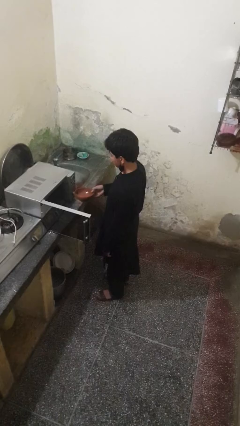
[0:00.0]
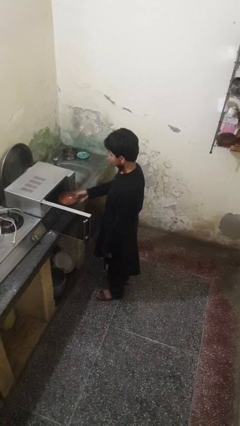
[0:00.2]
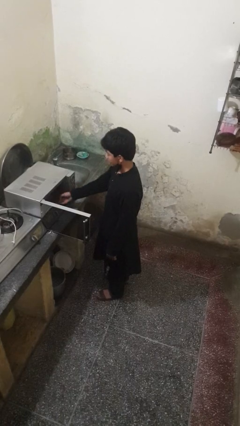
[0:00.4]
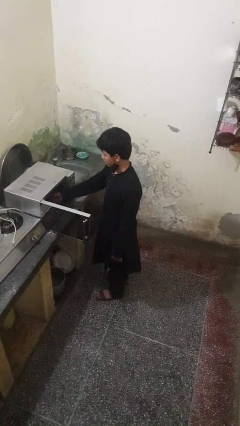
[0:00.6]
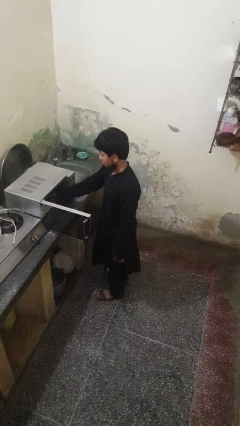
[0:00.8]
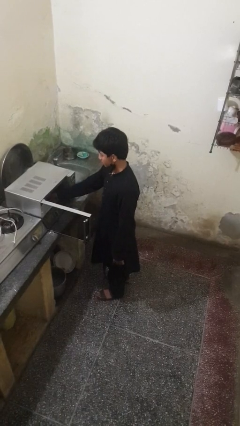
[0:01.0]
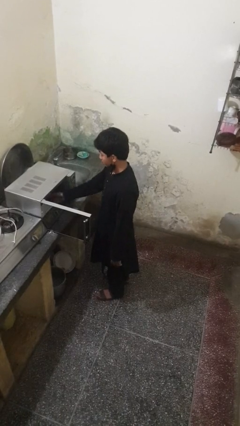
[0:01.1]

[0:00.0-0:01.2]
person puts object into microwave

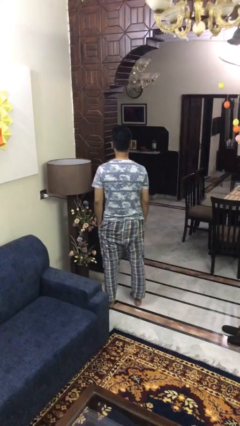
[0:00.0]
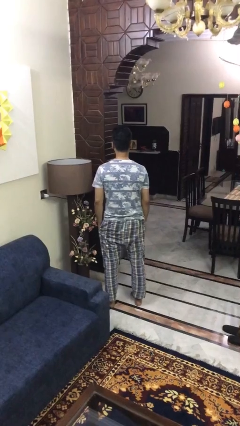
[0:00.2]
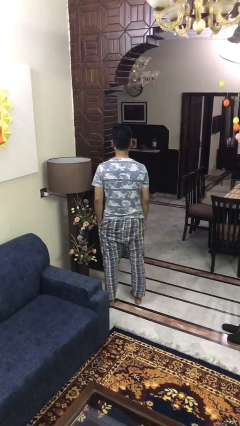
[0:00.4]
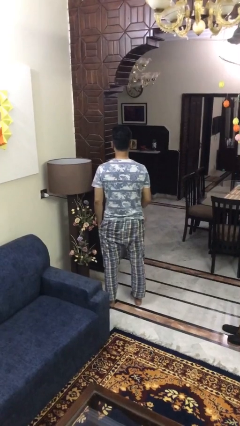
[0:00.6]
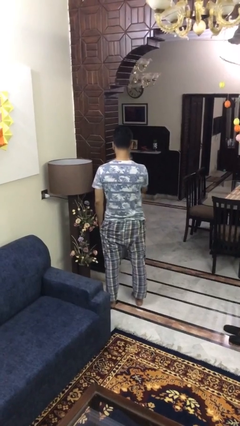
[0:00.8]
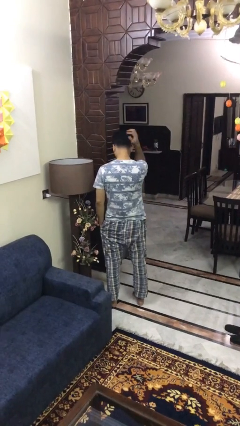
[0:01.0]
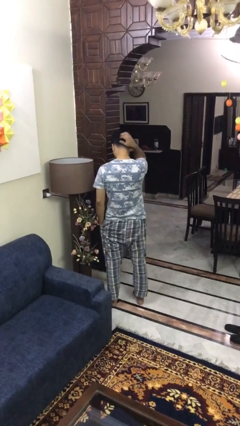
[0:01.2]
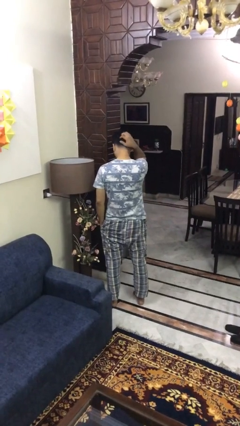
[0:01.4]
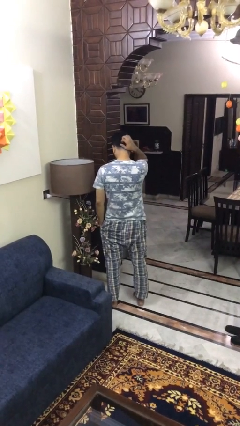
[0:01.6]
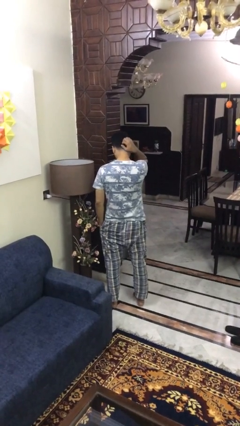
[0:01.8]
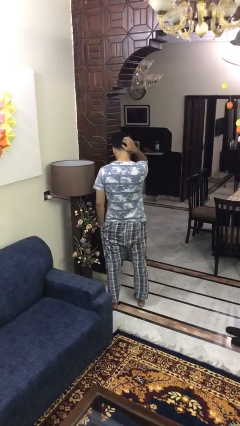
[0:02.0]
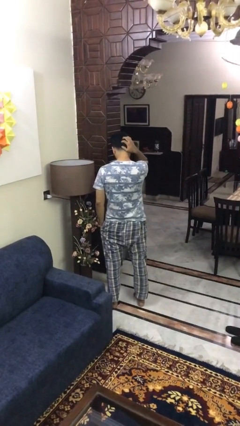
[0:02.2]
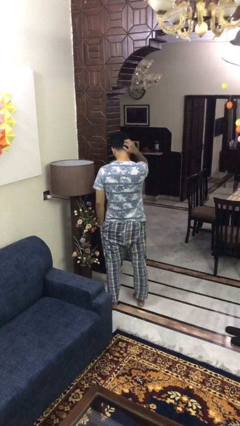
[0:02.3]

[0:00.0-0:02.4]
person scratches face

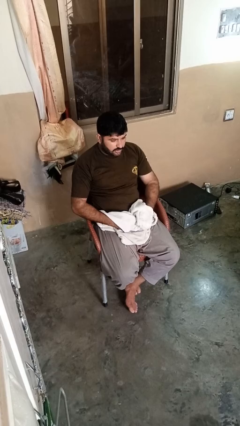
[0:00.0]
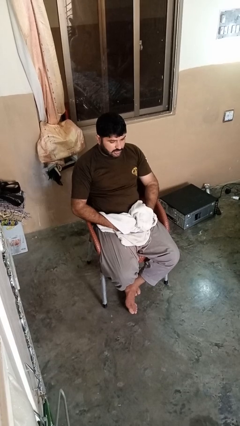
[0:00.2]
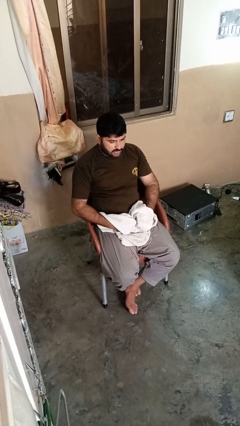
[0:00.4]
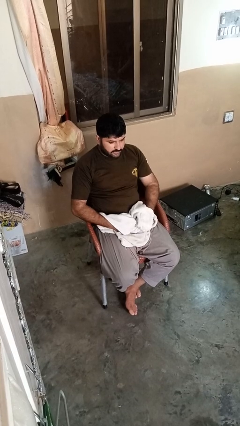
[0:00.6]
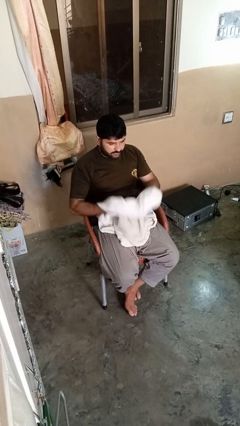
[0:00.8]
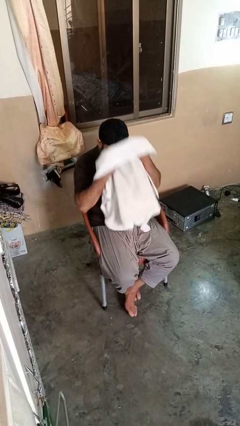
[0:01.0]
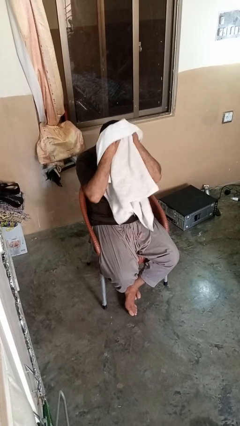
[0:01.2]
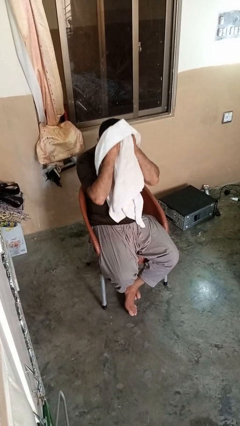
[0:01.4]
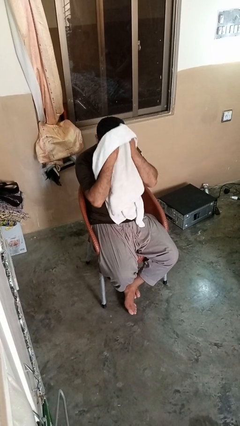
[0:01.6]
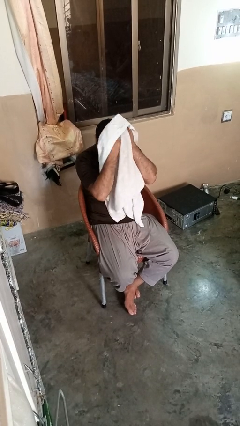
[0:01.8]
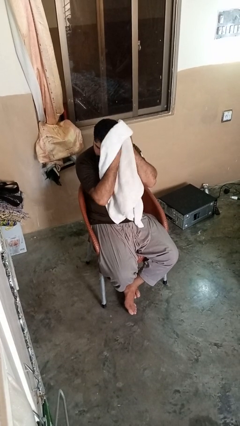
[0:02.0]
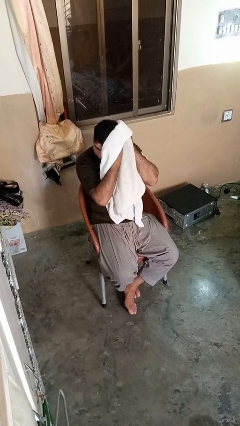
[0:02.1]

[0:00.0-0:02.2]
person dries hair with towel

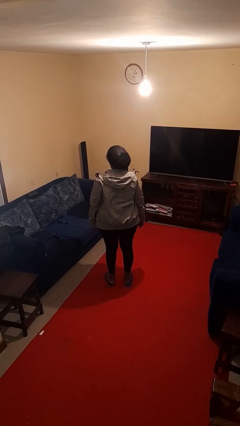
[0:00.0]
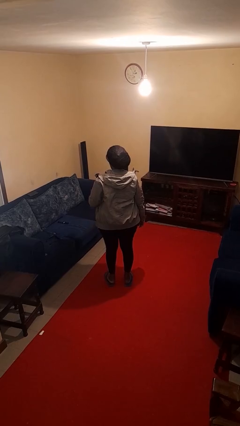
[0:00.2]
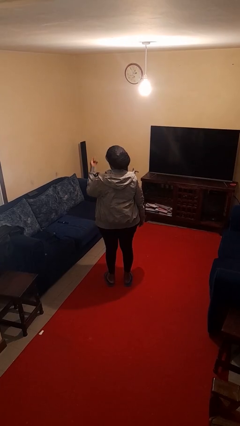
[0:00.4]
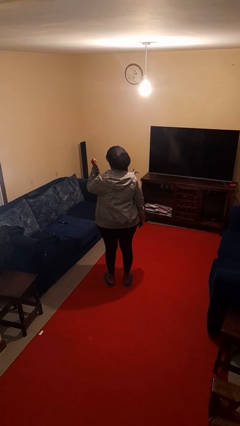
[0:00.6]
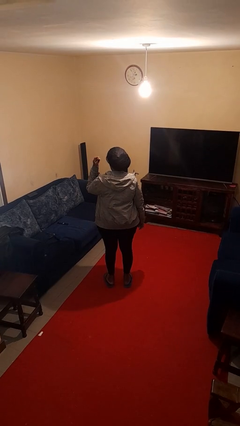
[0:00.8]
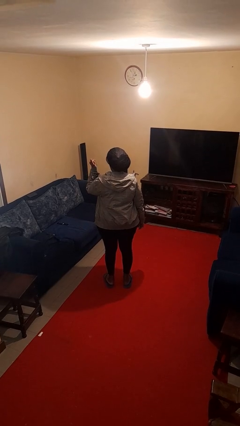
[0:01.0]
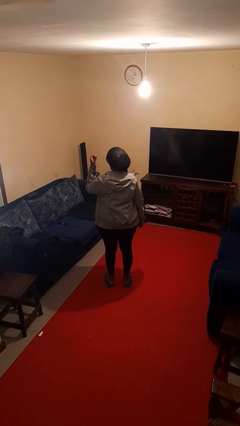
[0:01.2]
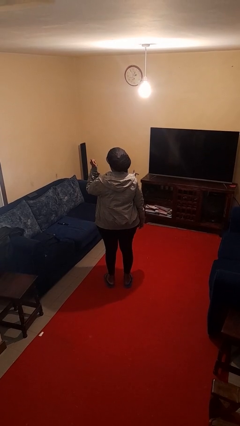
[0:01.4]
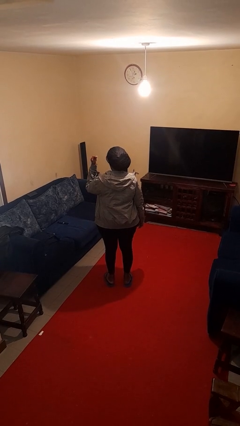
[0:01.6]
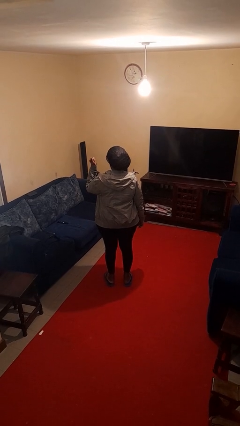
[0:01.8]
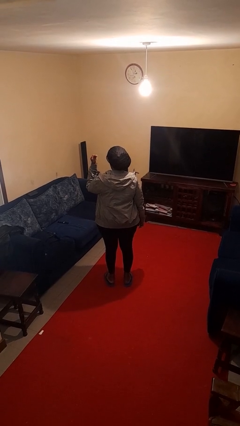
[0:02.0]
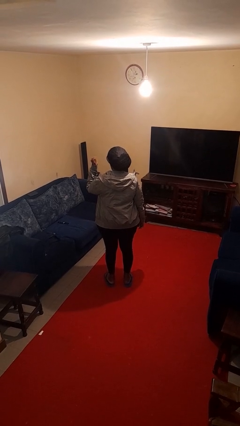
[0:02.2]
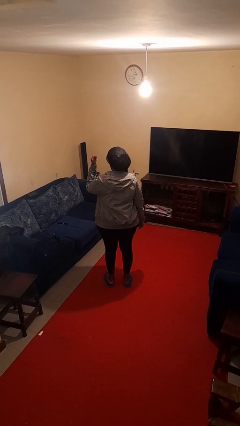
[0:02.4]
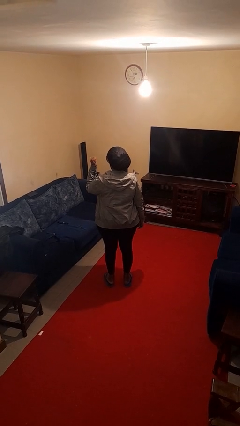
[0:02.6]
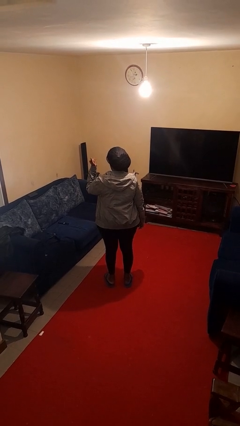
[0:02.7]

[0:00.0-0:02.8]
person snaps fingers

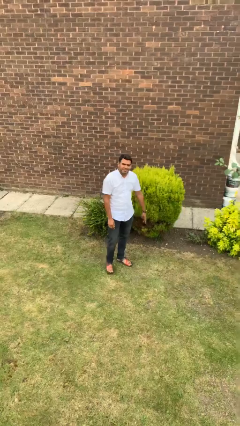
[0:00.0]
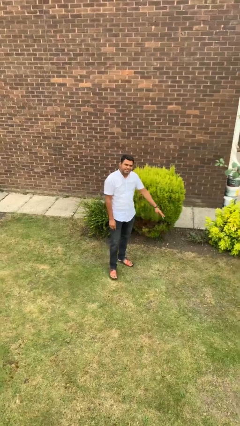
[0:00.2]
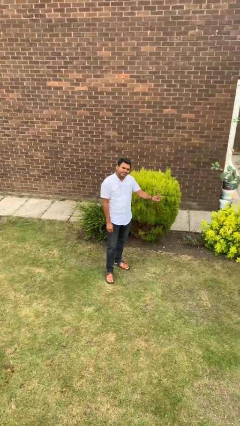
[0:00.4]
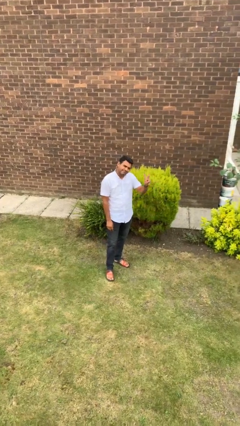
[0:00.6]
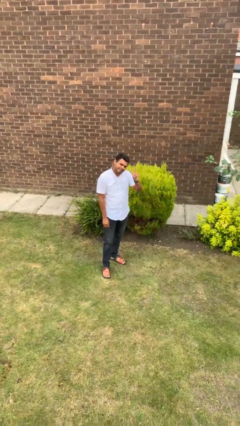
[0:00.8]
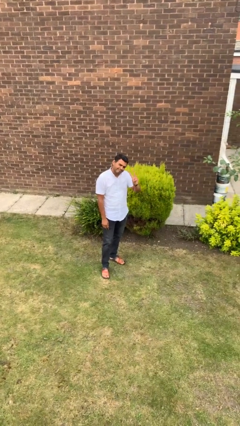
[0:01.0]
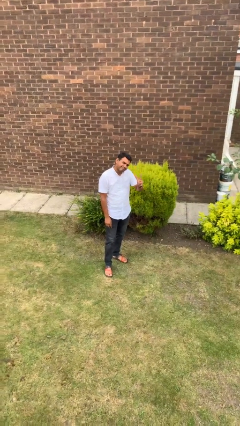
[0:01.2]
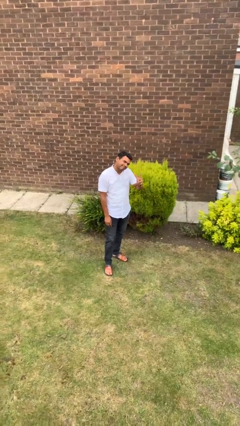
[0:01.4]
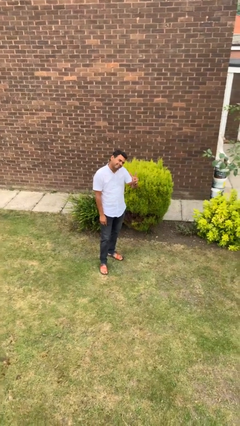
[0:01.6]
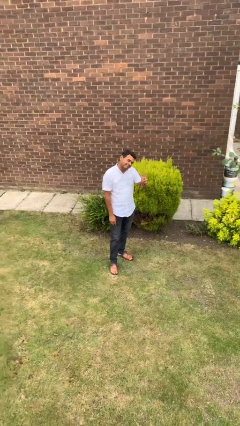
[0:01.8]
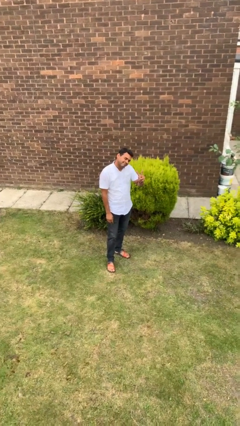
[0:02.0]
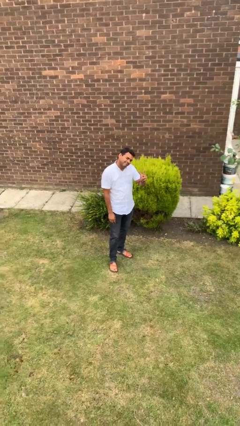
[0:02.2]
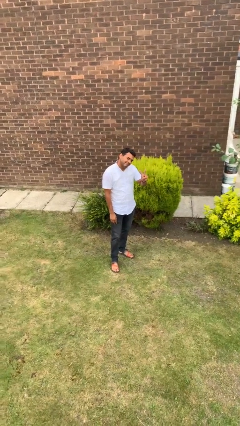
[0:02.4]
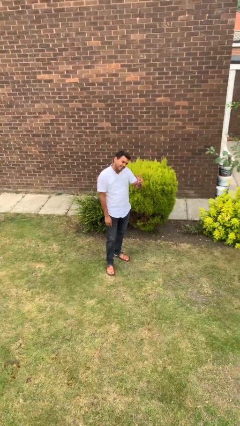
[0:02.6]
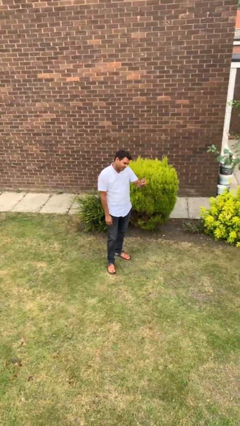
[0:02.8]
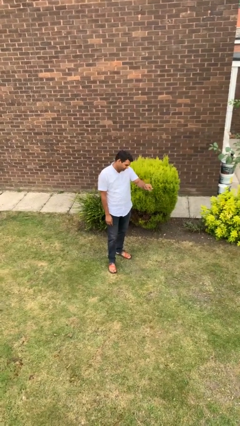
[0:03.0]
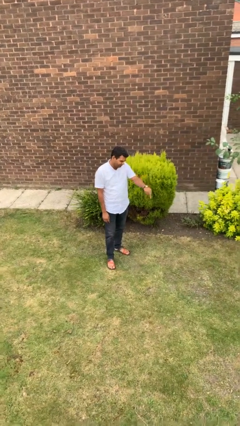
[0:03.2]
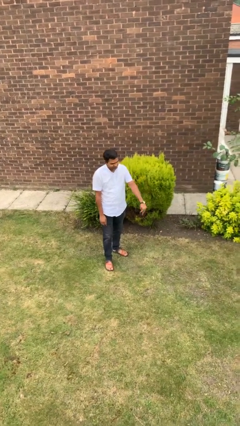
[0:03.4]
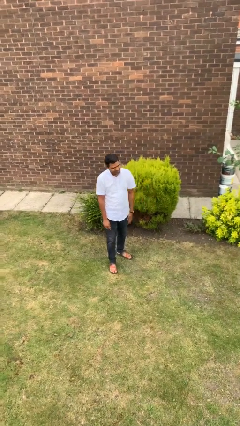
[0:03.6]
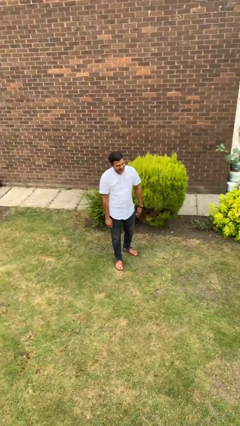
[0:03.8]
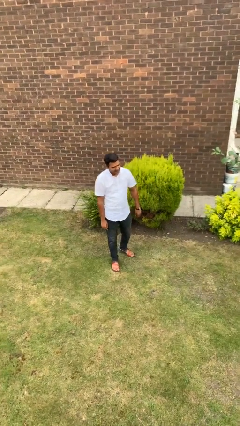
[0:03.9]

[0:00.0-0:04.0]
person gestures peace

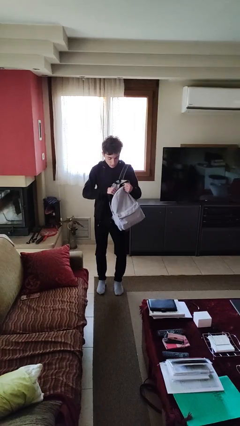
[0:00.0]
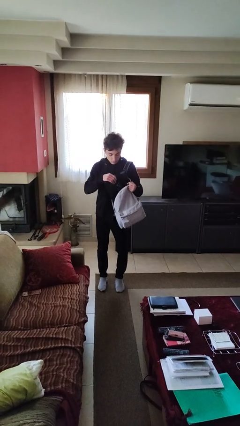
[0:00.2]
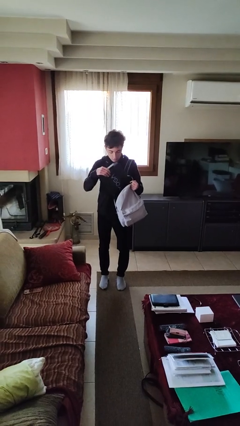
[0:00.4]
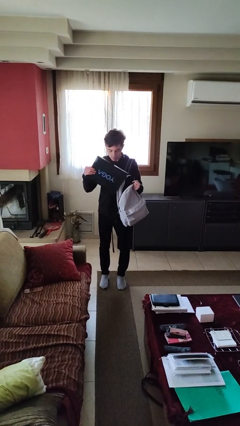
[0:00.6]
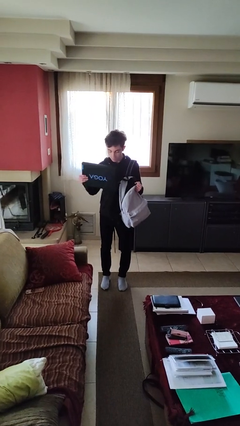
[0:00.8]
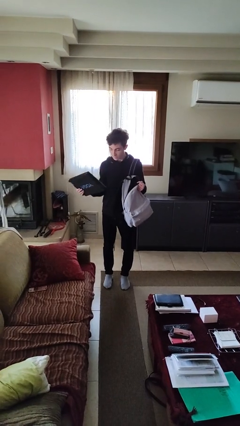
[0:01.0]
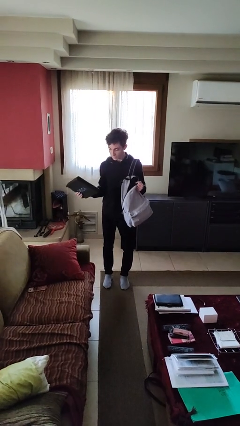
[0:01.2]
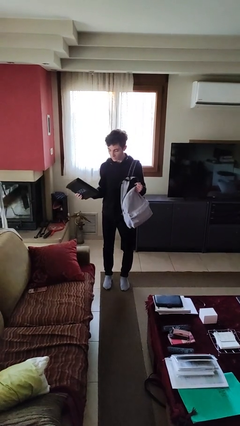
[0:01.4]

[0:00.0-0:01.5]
person takes object from backpack

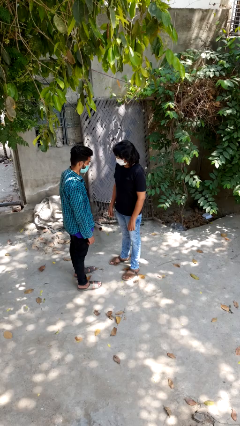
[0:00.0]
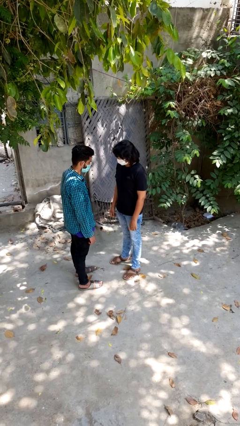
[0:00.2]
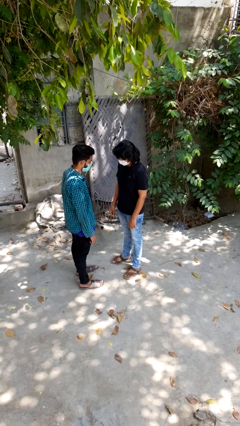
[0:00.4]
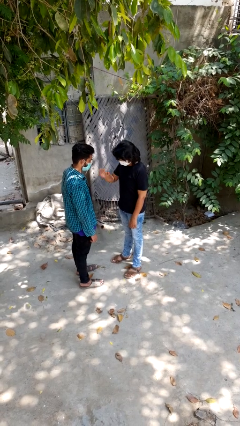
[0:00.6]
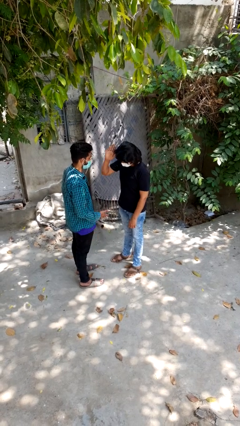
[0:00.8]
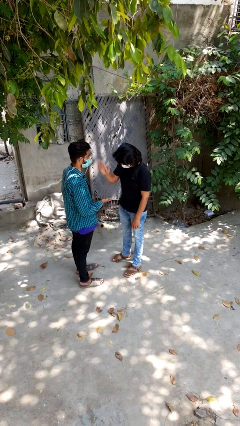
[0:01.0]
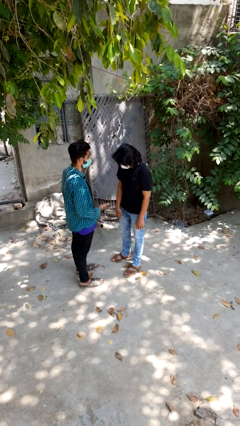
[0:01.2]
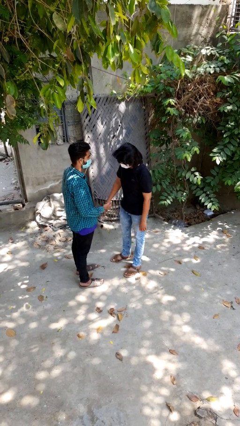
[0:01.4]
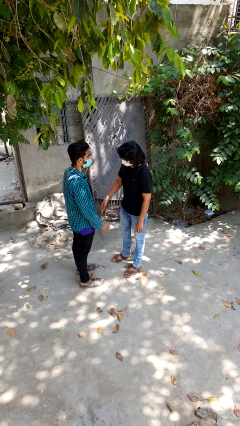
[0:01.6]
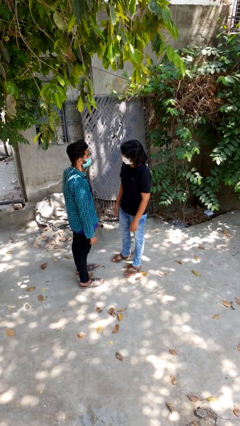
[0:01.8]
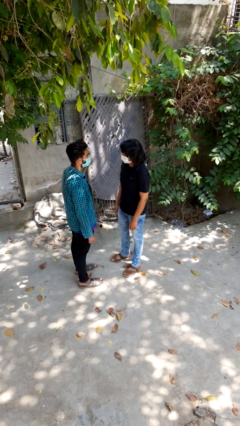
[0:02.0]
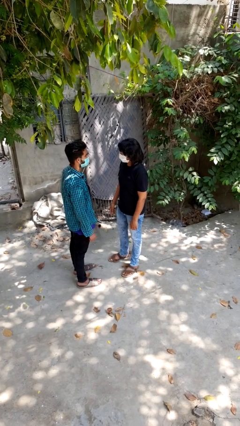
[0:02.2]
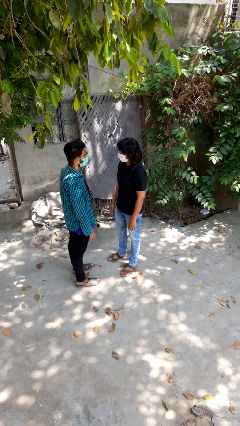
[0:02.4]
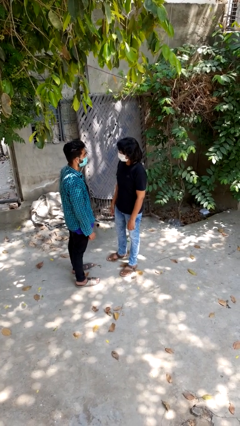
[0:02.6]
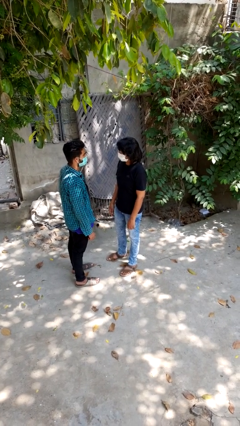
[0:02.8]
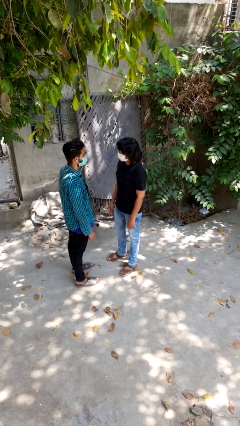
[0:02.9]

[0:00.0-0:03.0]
person highfives hand
